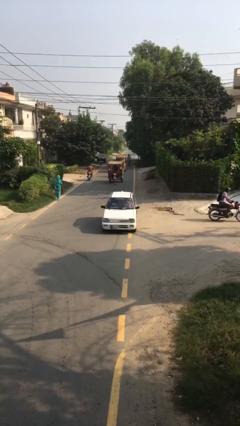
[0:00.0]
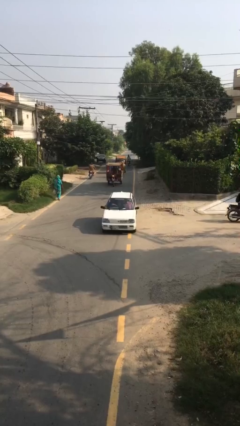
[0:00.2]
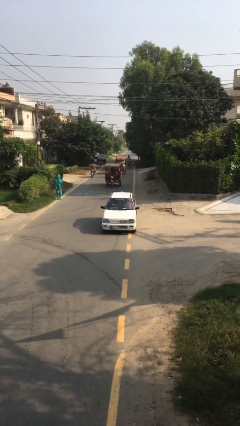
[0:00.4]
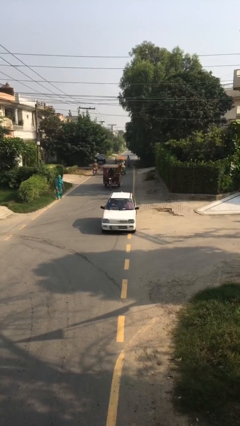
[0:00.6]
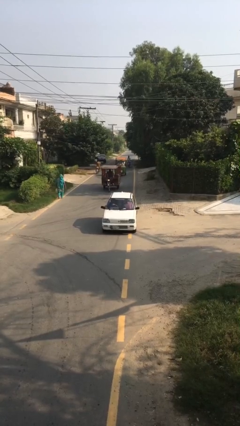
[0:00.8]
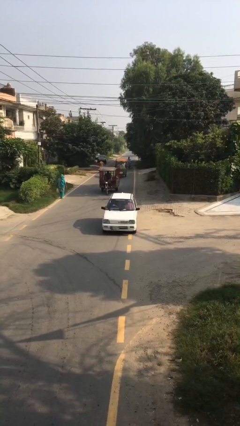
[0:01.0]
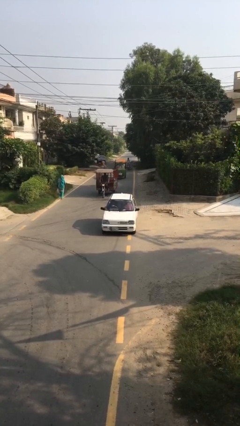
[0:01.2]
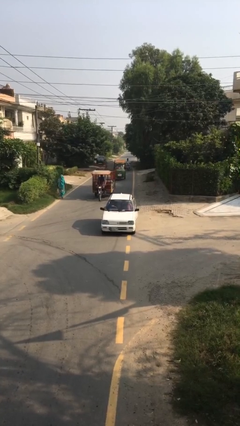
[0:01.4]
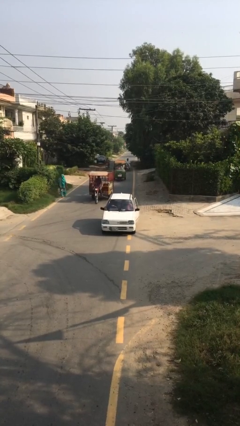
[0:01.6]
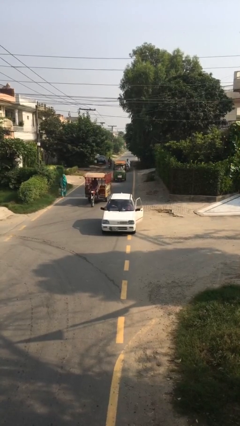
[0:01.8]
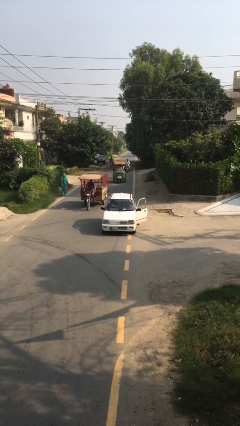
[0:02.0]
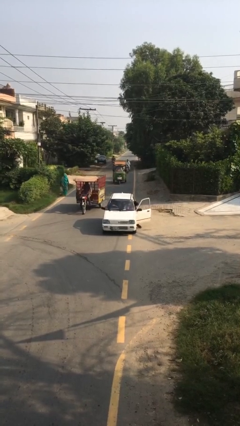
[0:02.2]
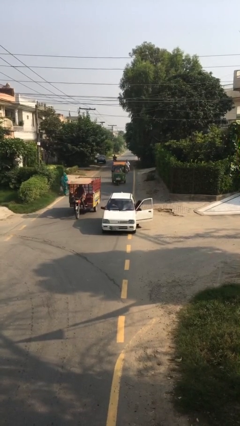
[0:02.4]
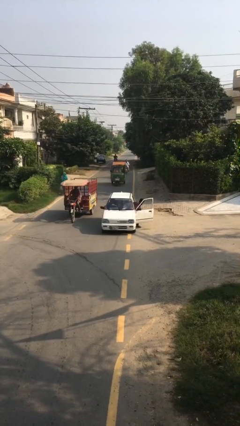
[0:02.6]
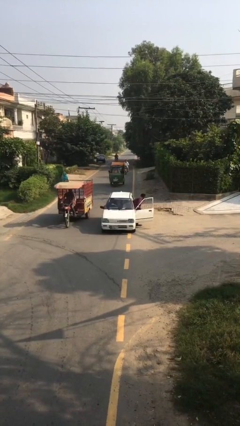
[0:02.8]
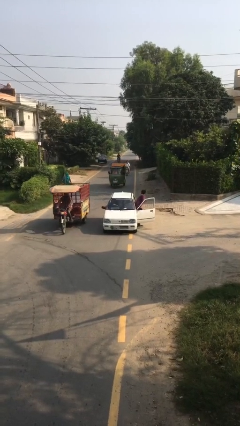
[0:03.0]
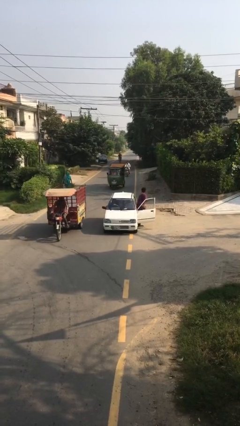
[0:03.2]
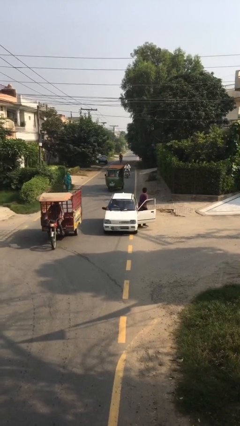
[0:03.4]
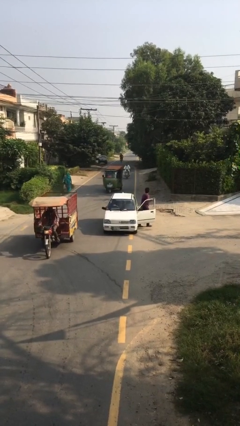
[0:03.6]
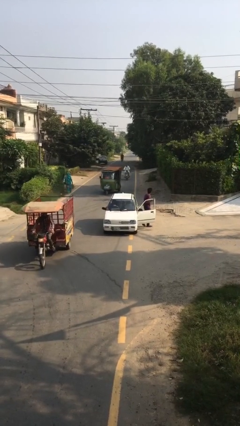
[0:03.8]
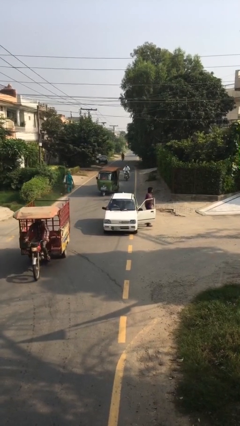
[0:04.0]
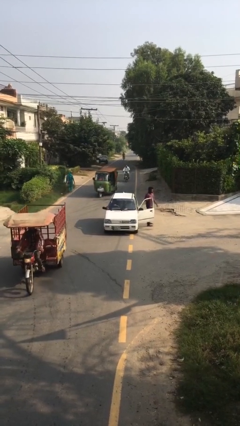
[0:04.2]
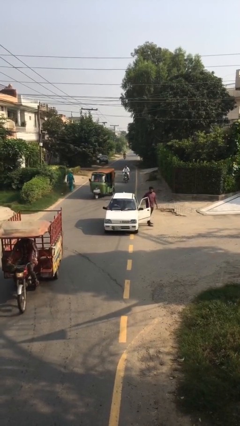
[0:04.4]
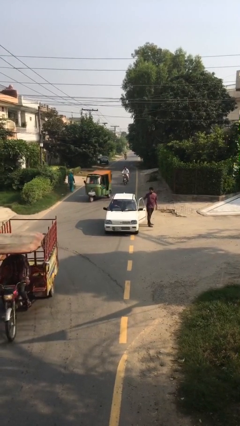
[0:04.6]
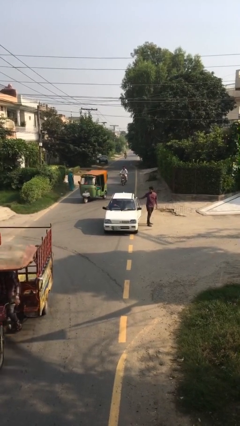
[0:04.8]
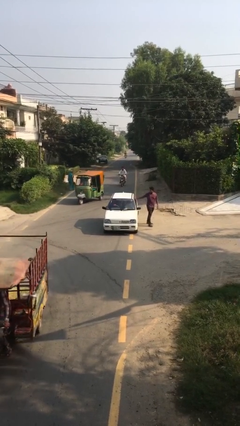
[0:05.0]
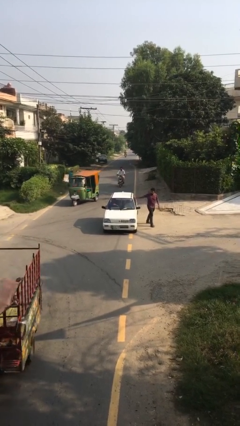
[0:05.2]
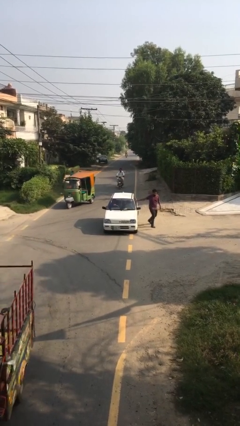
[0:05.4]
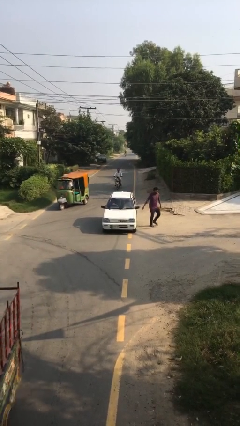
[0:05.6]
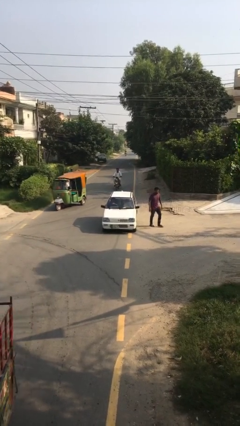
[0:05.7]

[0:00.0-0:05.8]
car drops off person

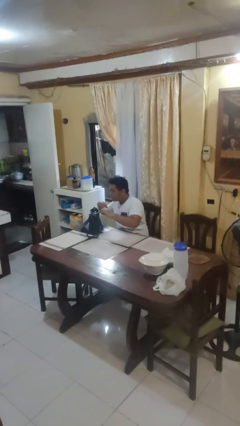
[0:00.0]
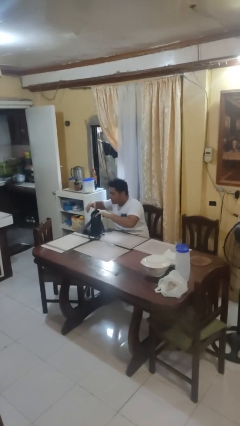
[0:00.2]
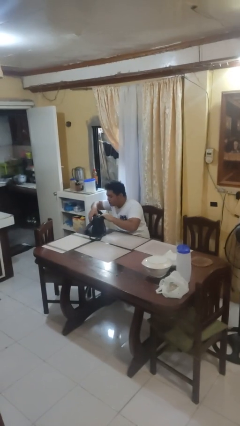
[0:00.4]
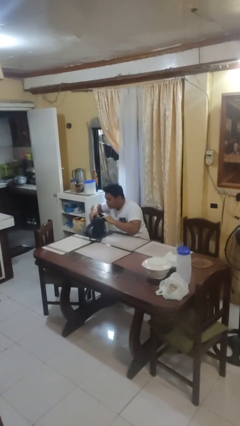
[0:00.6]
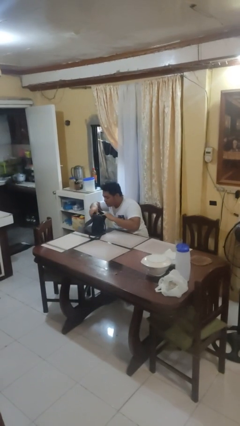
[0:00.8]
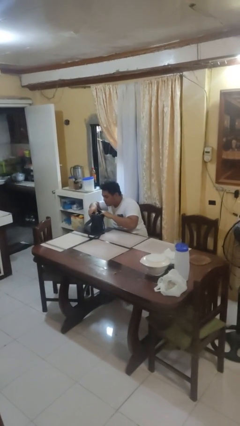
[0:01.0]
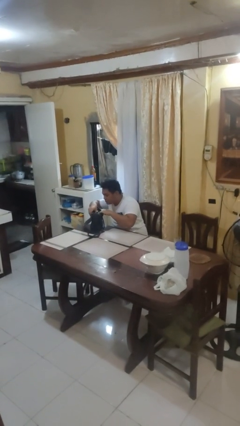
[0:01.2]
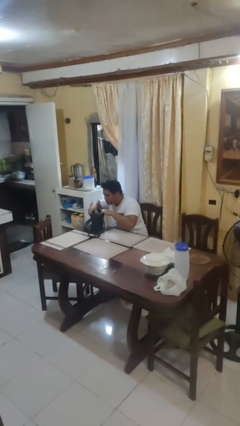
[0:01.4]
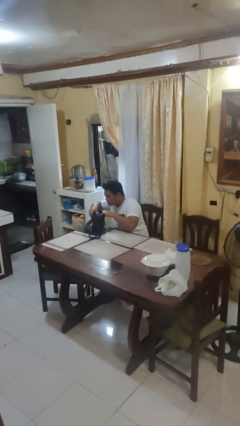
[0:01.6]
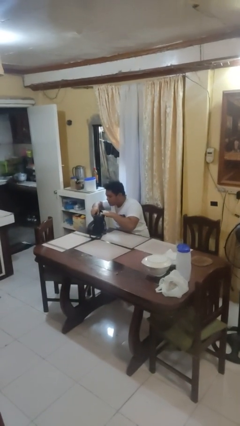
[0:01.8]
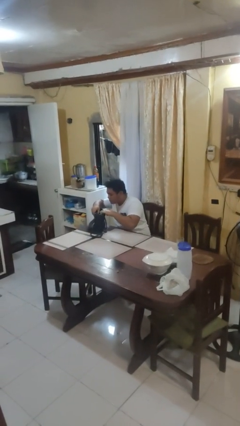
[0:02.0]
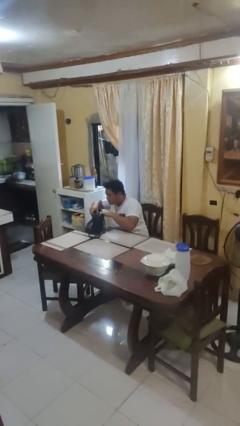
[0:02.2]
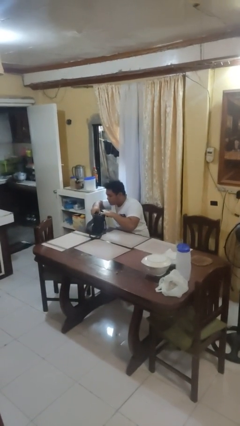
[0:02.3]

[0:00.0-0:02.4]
person searches in purse

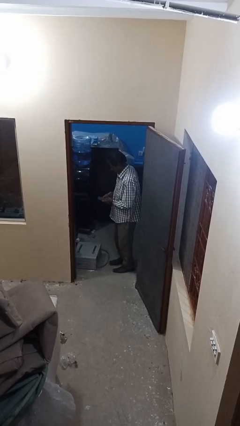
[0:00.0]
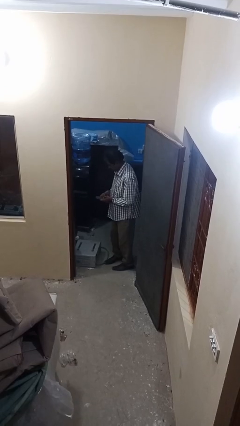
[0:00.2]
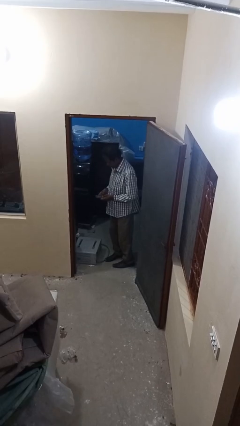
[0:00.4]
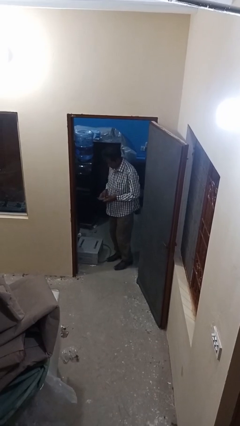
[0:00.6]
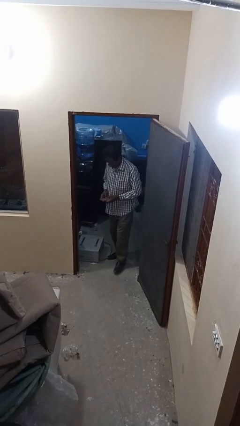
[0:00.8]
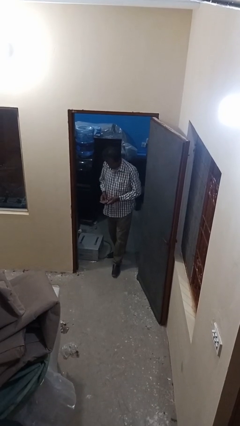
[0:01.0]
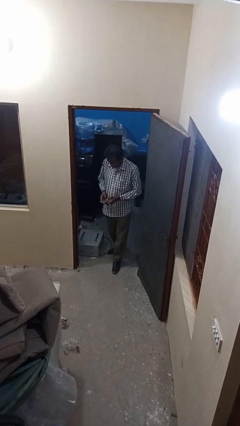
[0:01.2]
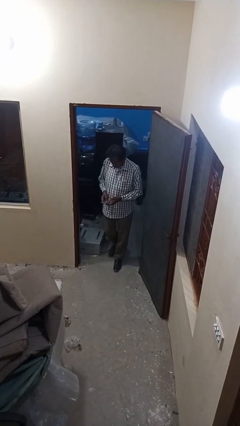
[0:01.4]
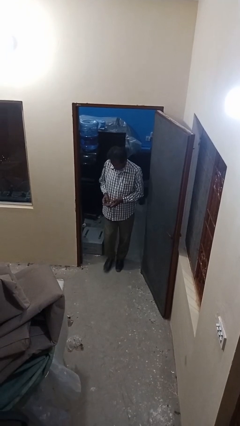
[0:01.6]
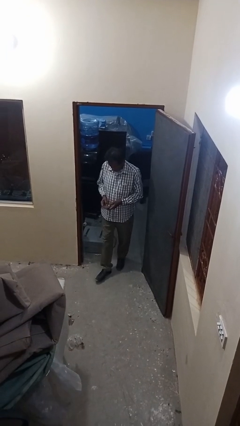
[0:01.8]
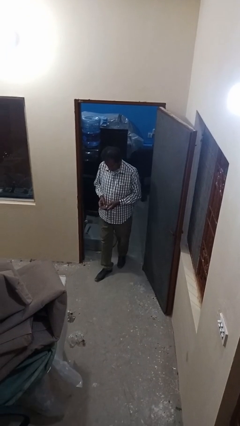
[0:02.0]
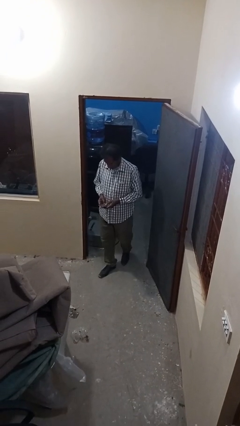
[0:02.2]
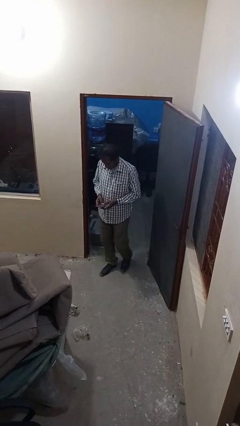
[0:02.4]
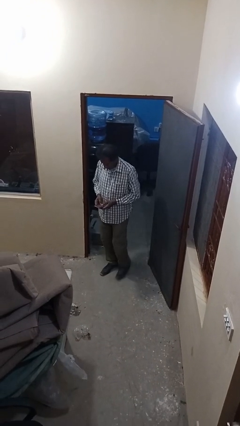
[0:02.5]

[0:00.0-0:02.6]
person enters scene through structure

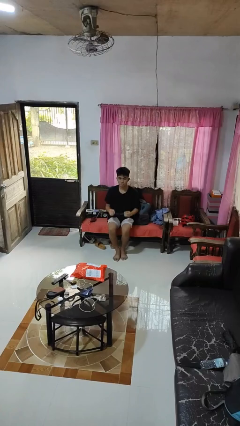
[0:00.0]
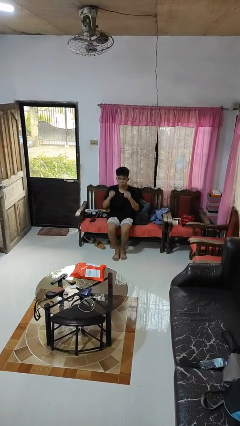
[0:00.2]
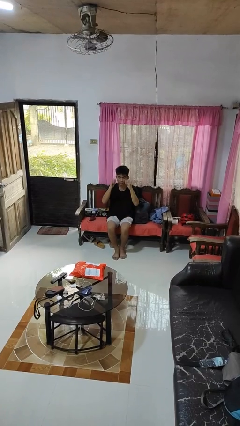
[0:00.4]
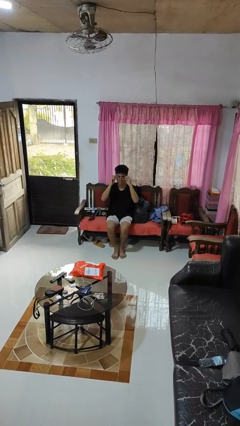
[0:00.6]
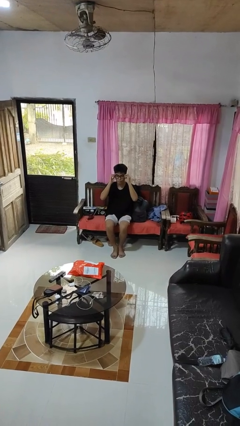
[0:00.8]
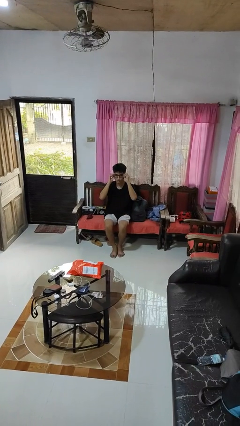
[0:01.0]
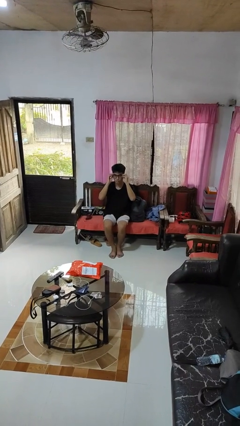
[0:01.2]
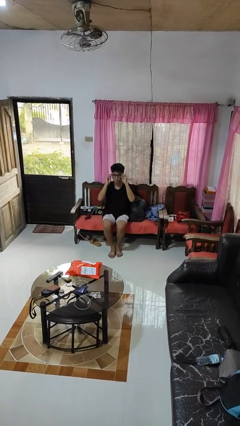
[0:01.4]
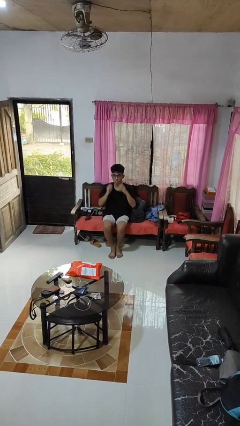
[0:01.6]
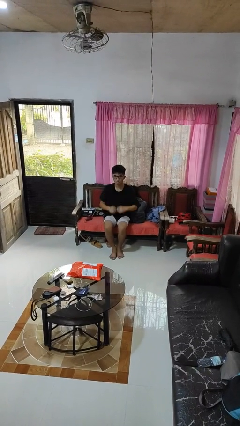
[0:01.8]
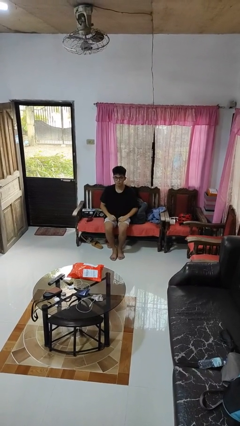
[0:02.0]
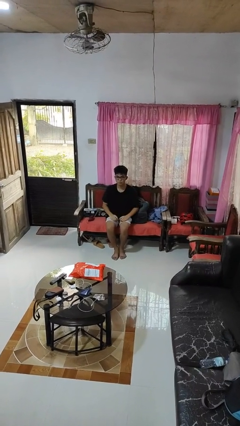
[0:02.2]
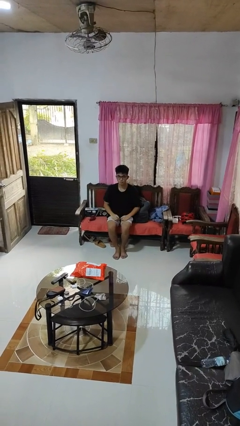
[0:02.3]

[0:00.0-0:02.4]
person puts on glasses

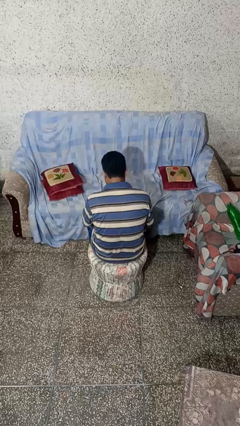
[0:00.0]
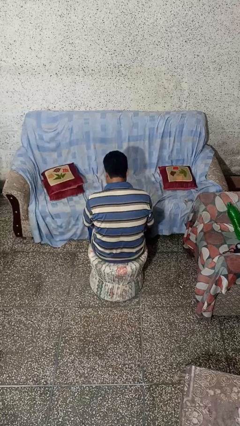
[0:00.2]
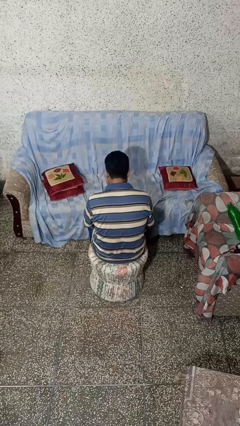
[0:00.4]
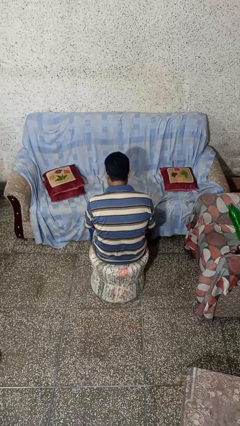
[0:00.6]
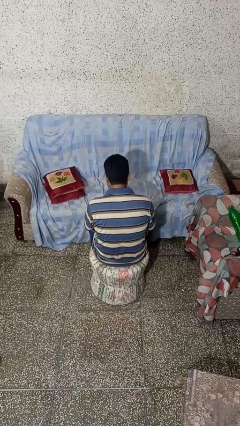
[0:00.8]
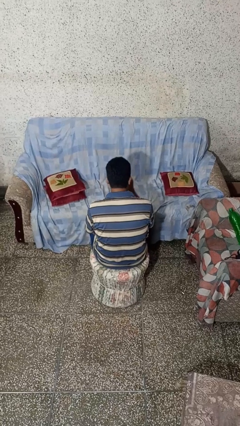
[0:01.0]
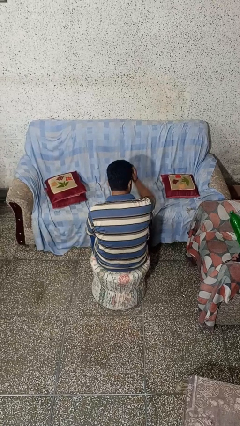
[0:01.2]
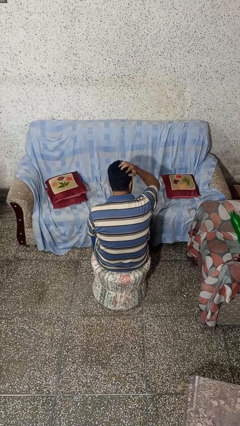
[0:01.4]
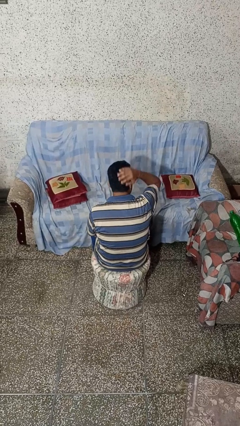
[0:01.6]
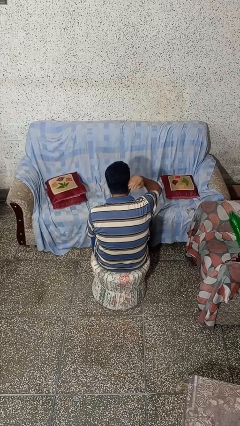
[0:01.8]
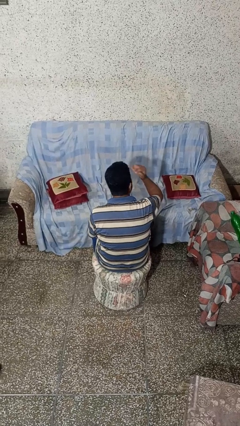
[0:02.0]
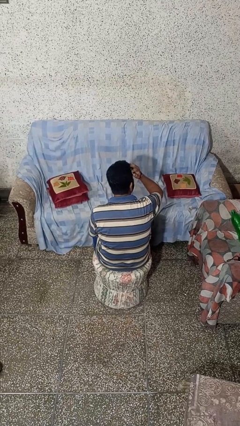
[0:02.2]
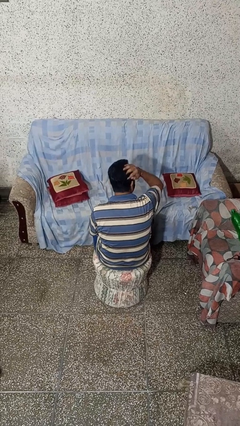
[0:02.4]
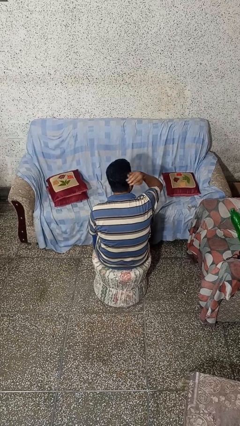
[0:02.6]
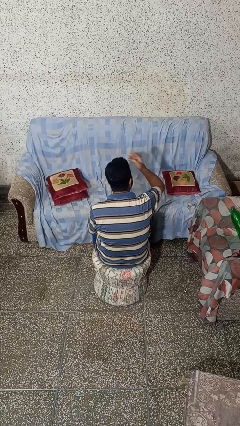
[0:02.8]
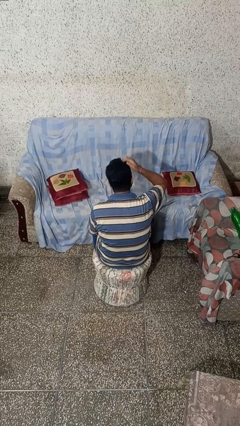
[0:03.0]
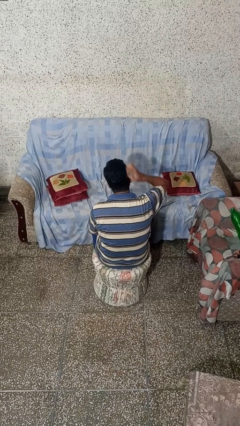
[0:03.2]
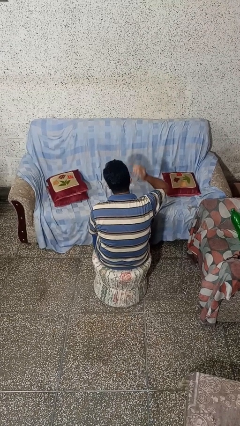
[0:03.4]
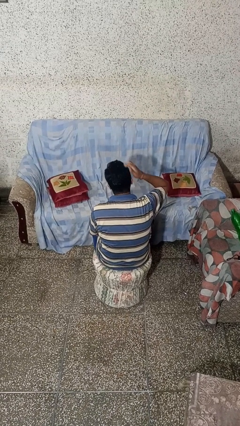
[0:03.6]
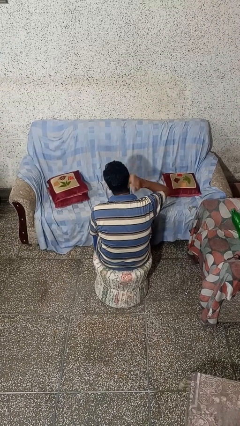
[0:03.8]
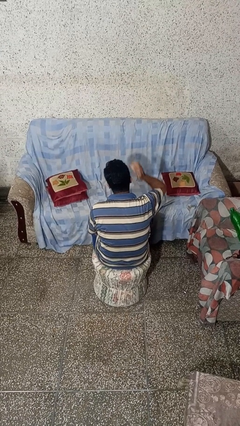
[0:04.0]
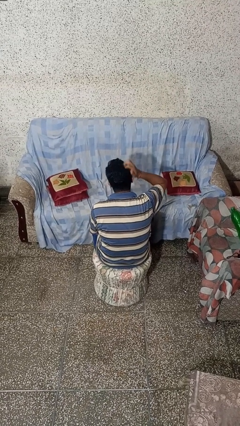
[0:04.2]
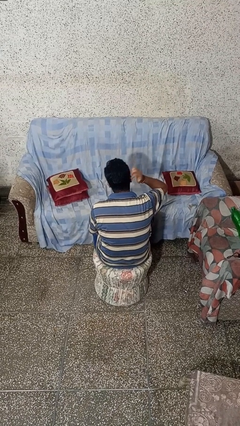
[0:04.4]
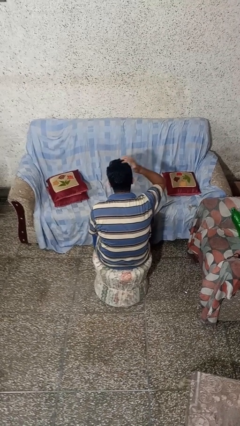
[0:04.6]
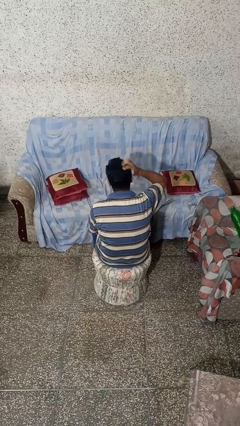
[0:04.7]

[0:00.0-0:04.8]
person strokes hair
